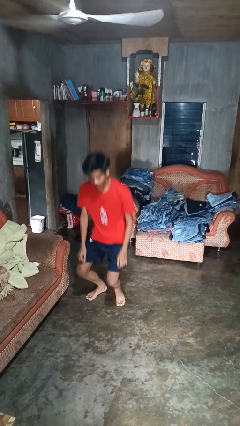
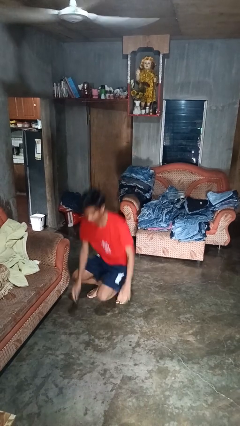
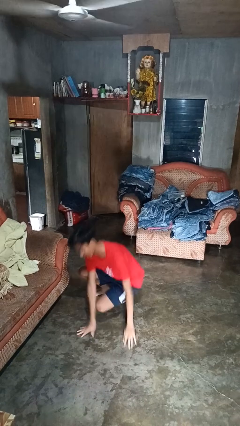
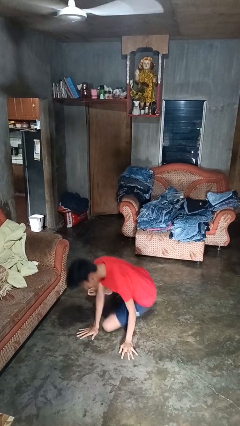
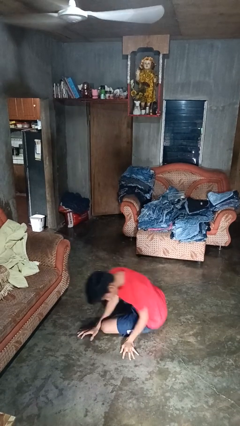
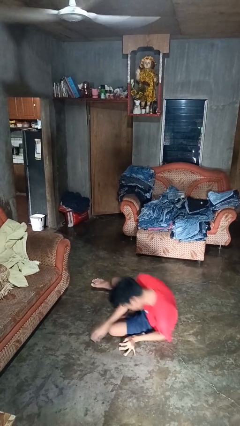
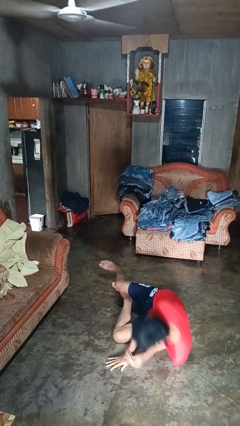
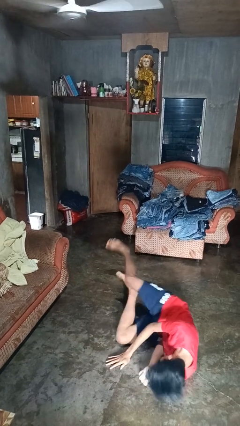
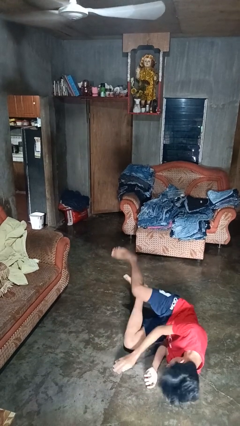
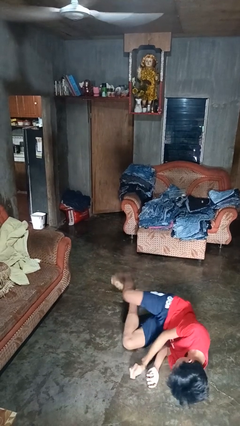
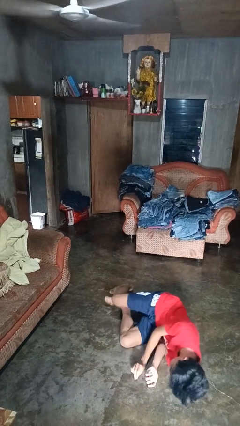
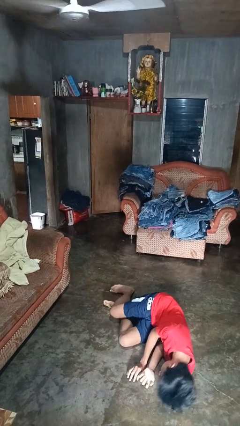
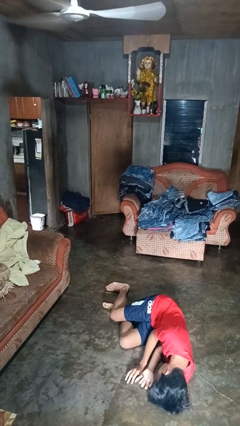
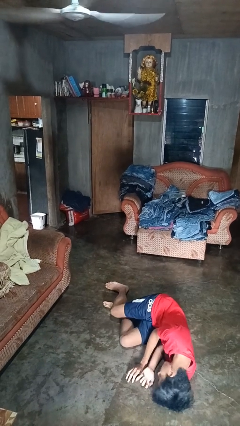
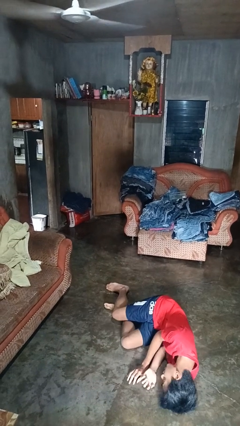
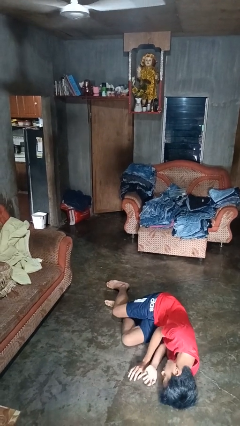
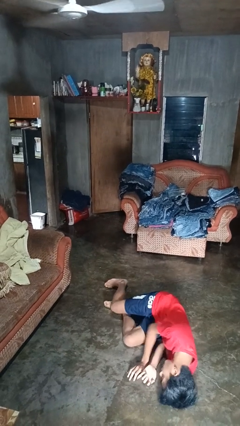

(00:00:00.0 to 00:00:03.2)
person falls while standing

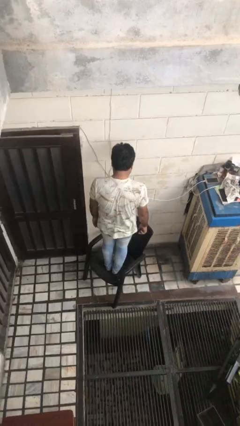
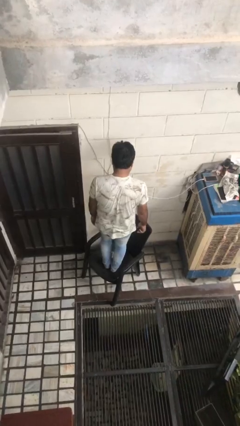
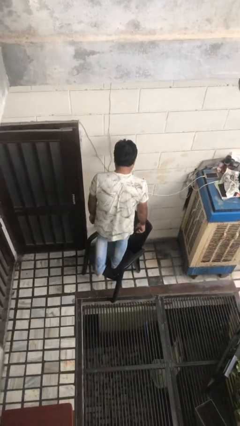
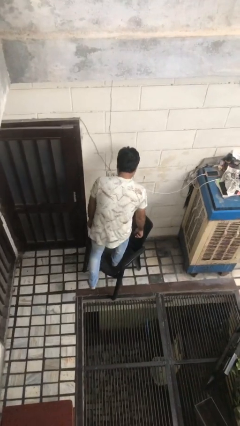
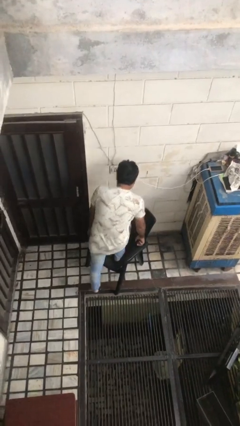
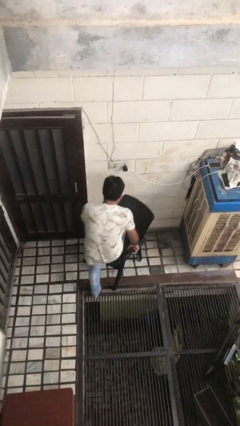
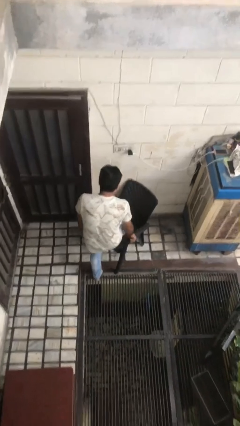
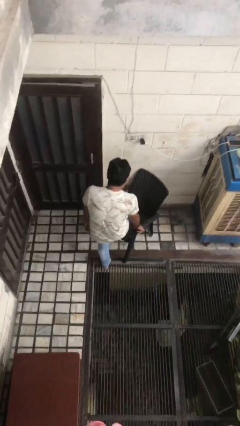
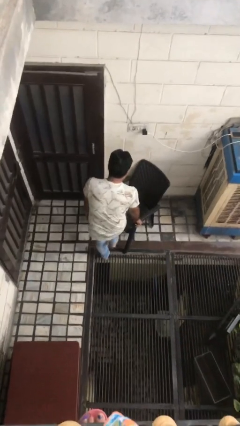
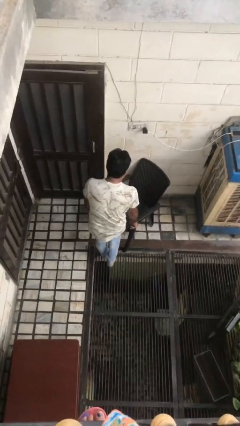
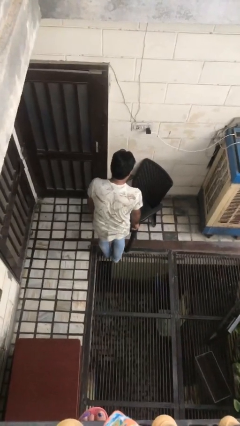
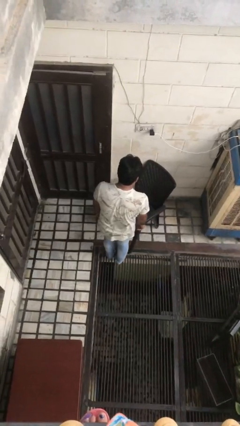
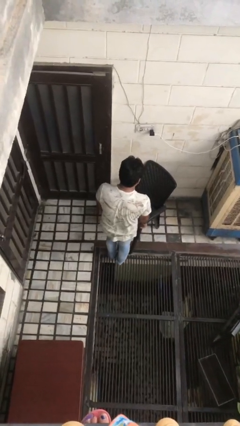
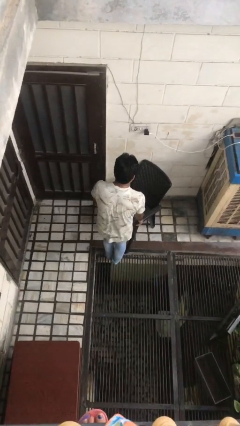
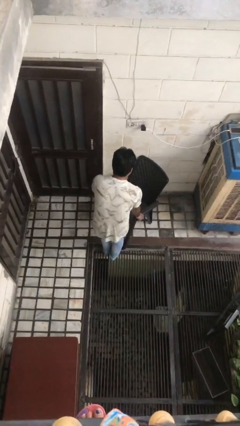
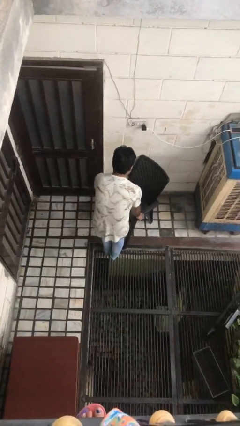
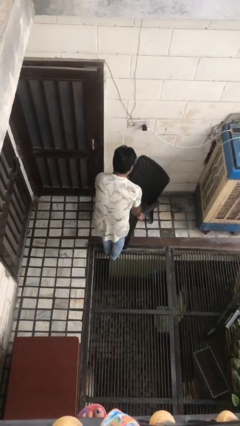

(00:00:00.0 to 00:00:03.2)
person climbs off chair

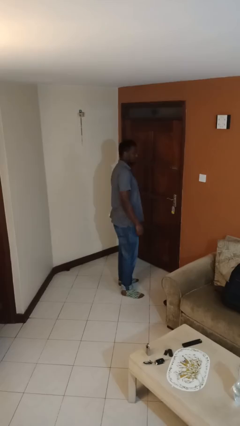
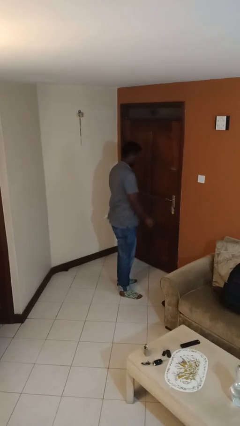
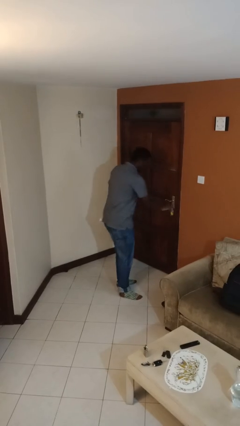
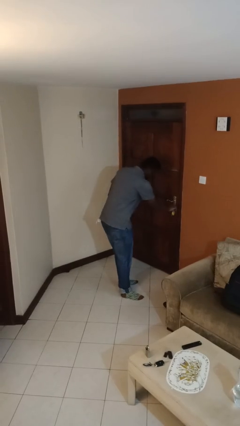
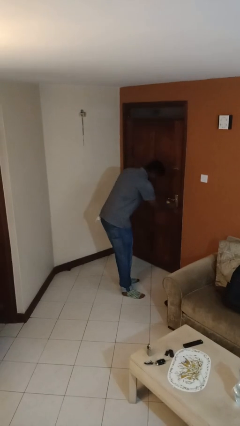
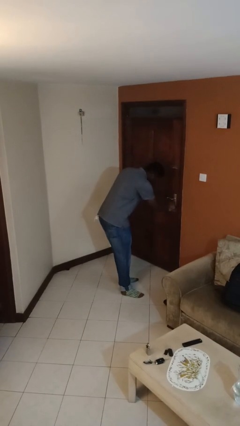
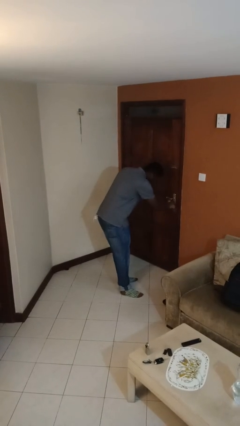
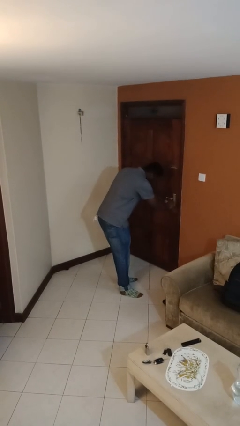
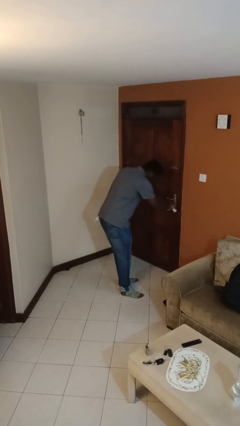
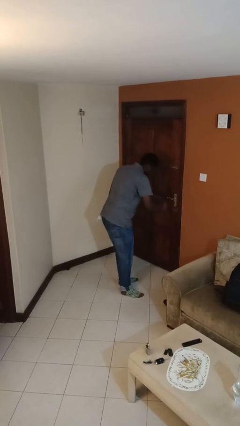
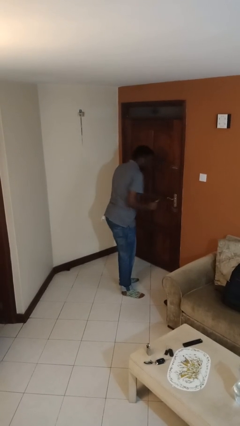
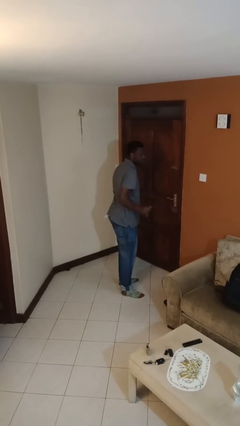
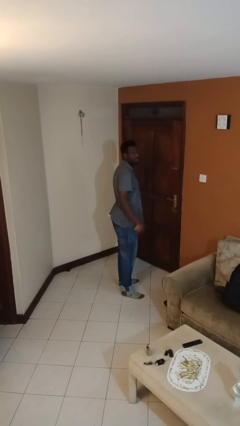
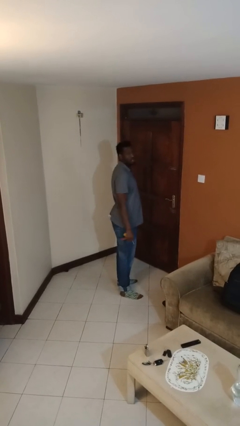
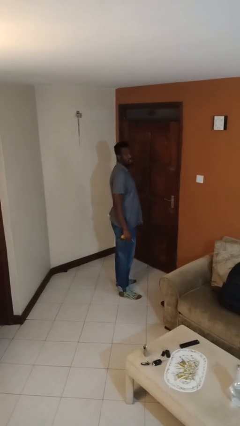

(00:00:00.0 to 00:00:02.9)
person locks door with keys

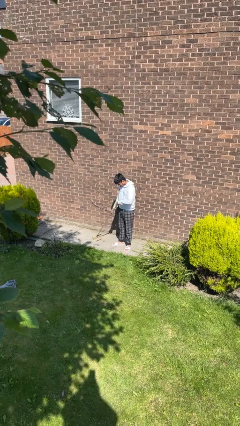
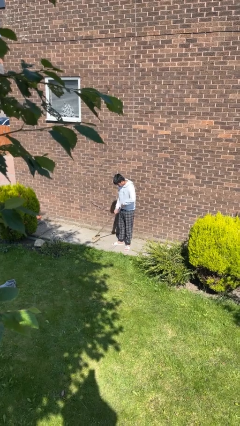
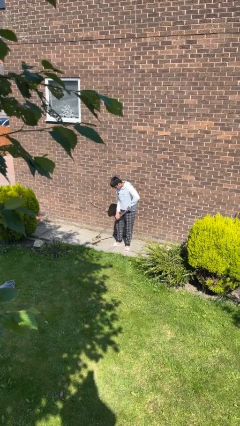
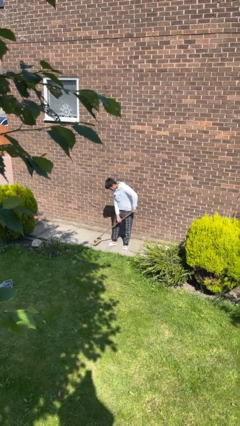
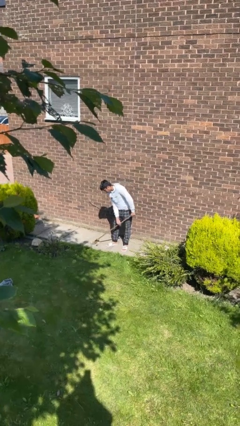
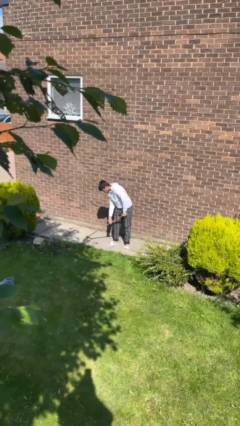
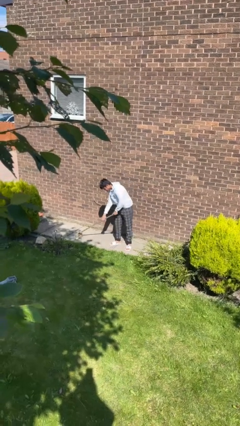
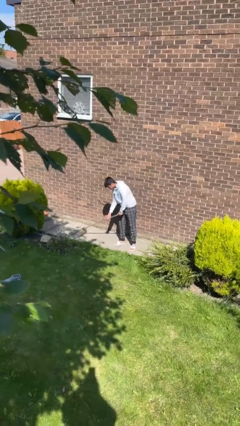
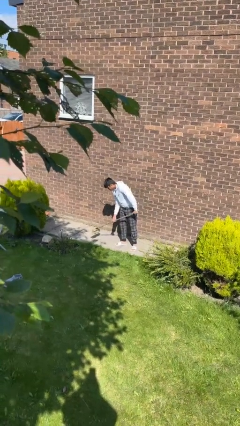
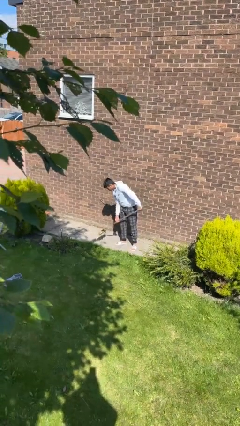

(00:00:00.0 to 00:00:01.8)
person sweeps floor

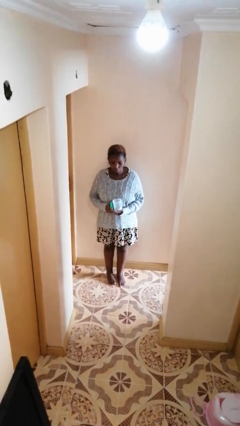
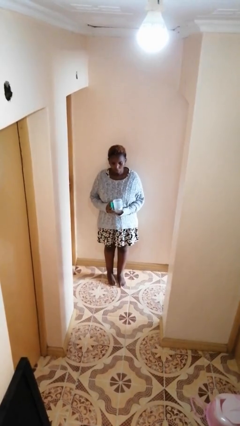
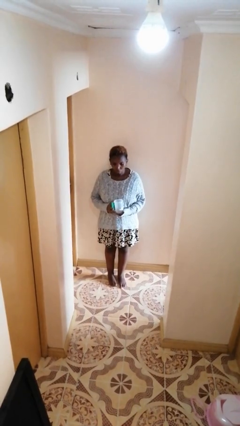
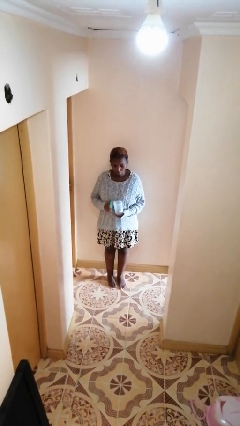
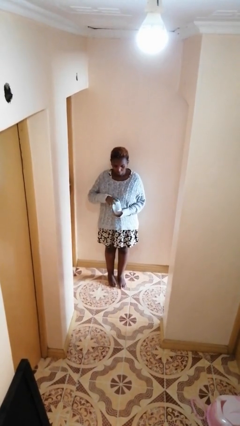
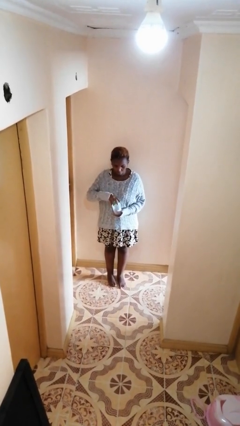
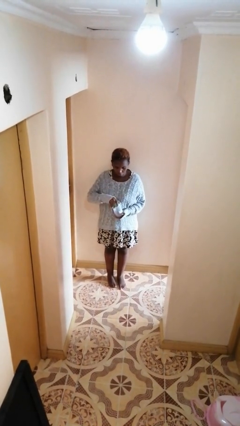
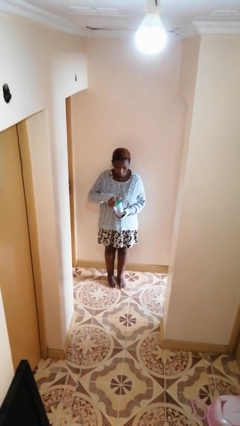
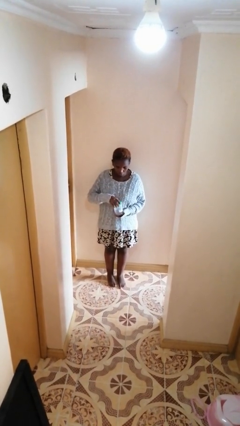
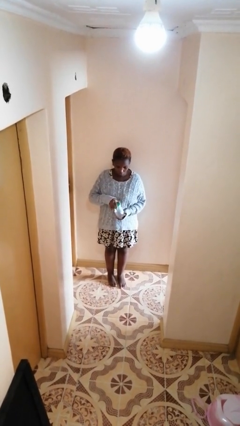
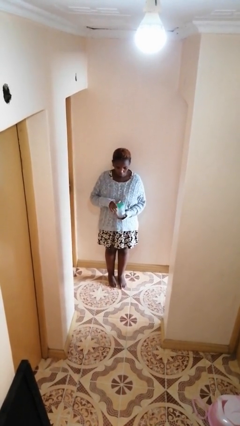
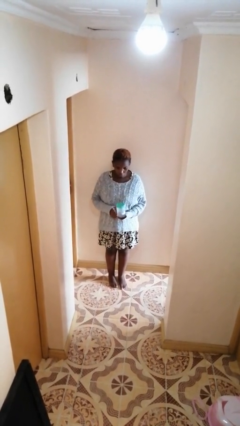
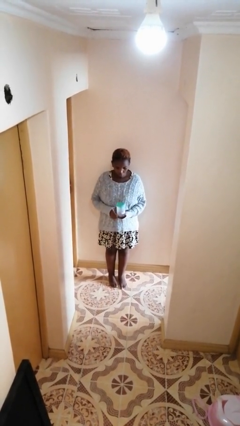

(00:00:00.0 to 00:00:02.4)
person closes jar

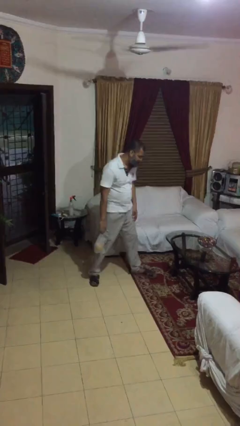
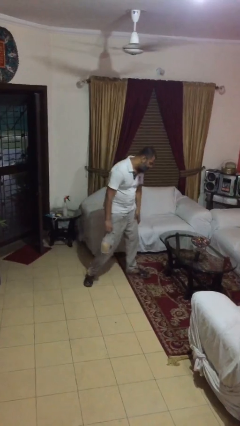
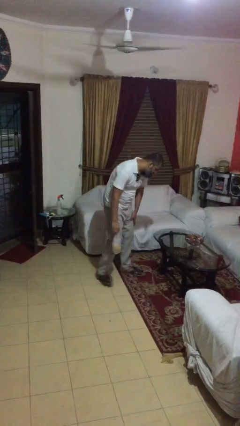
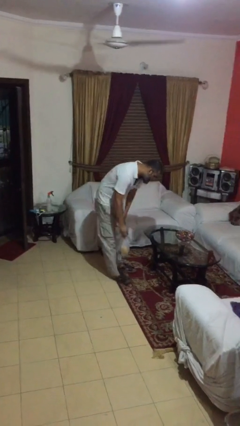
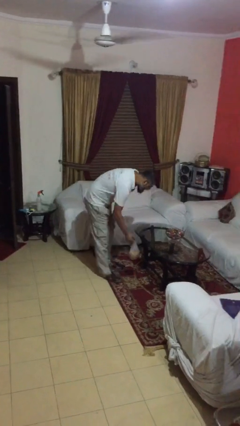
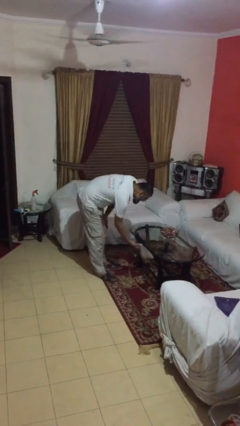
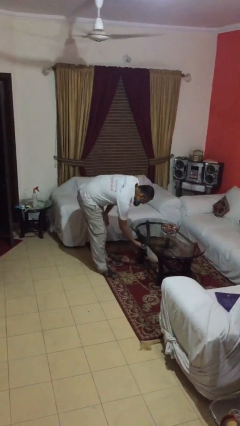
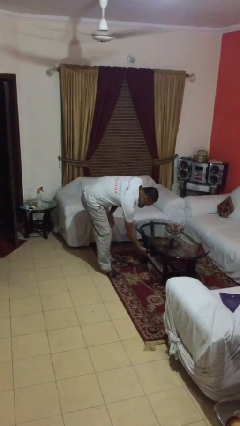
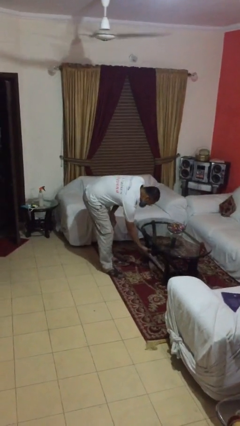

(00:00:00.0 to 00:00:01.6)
person puts down object on table

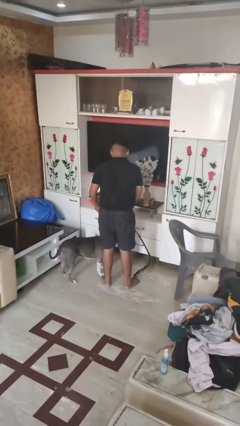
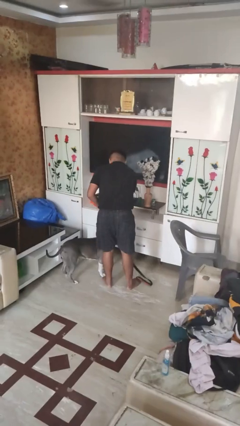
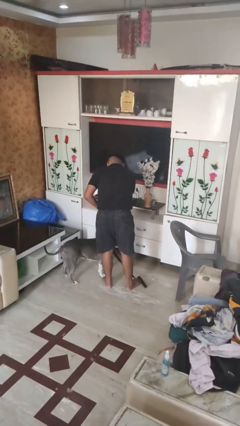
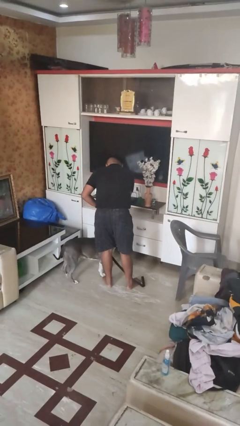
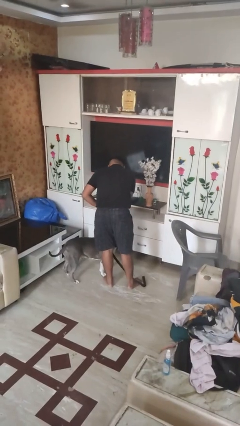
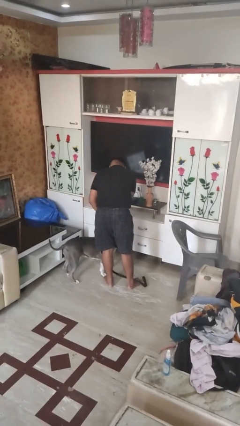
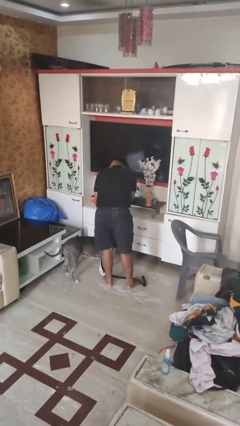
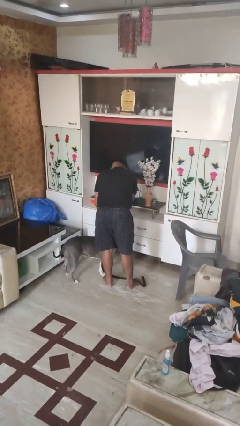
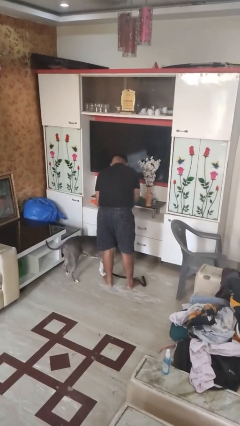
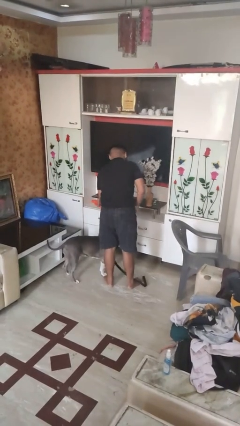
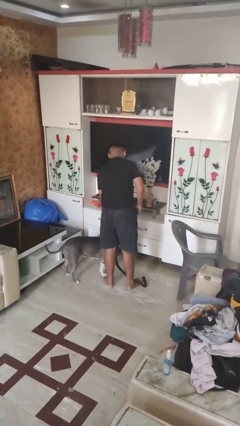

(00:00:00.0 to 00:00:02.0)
person unattaches leash from dog
